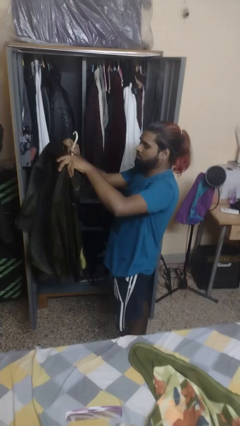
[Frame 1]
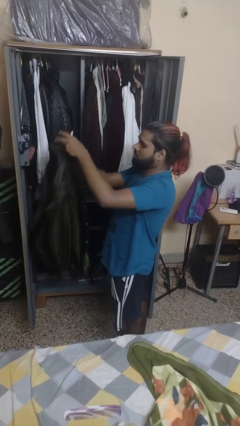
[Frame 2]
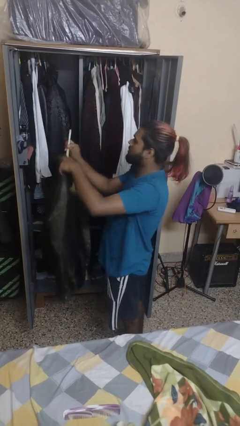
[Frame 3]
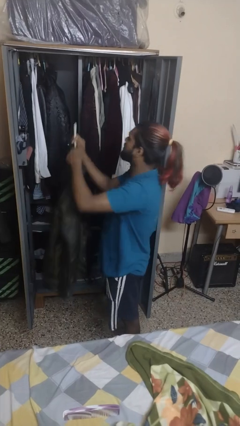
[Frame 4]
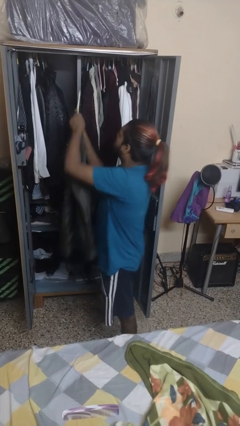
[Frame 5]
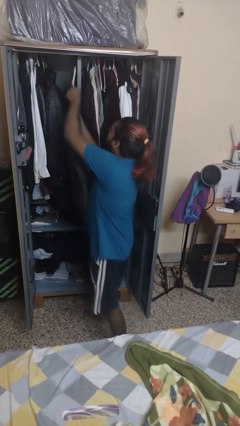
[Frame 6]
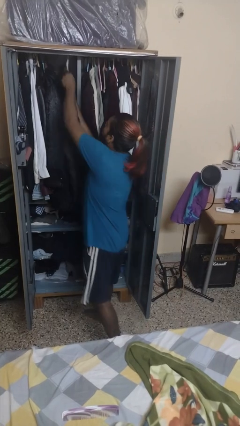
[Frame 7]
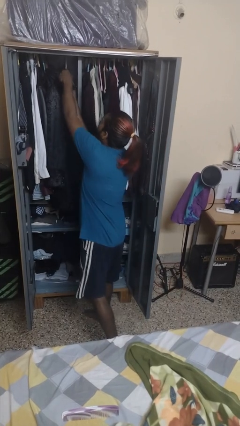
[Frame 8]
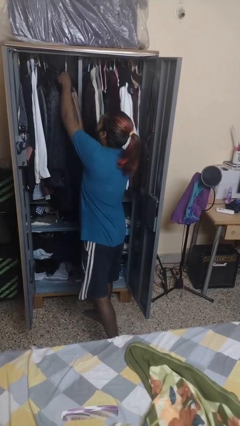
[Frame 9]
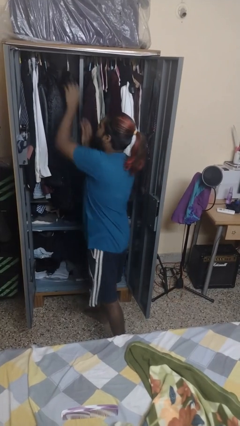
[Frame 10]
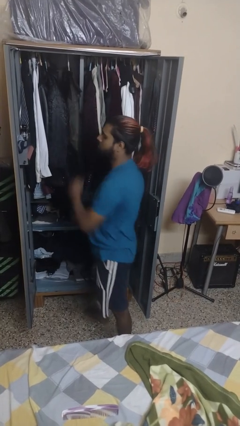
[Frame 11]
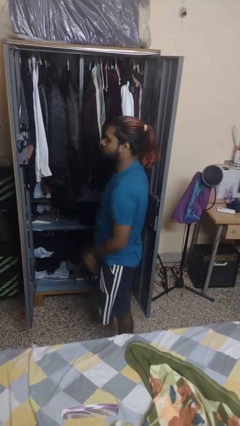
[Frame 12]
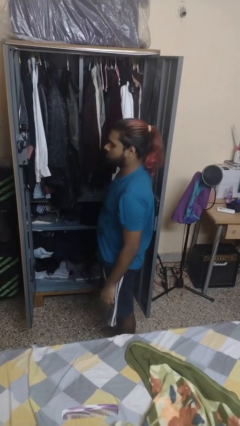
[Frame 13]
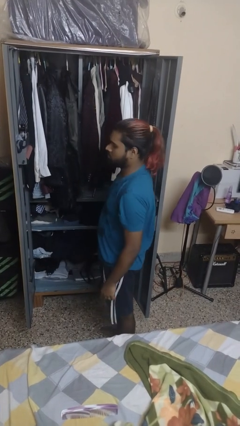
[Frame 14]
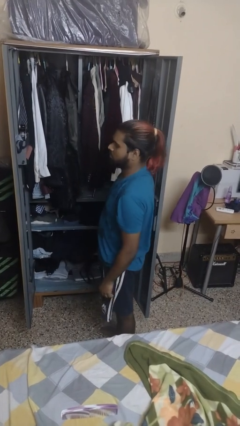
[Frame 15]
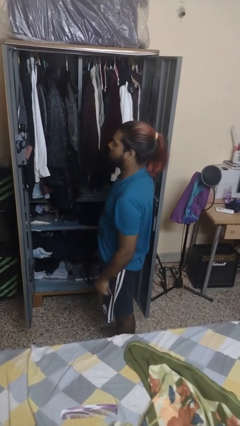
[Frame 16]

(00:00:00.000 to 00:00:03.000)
person puts clothes into dresser

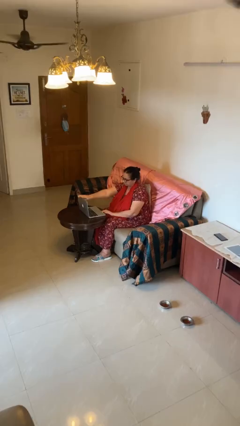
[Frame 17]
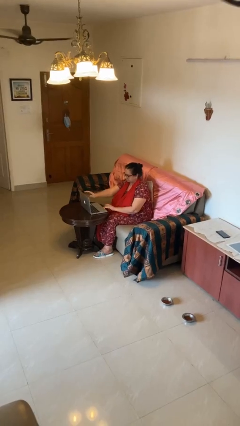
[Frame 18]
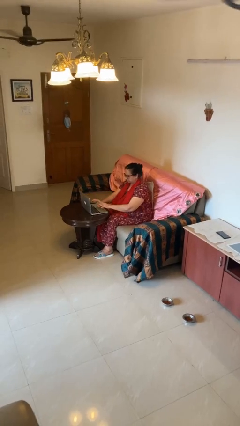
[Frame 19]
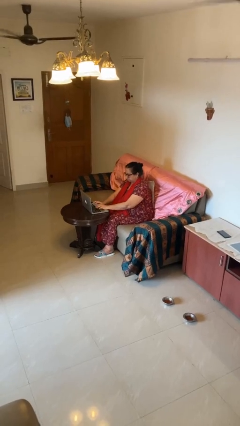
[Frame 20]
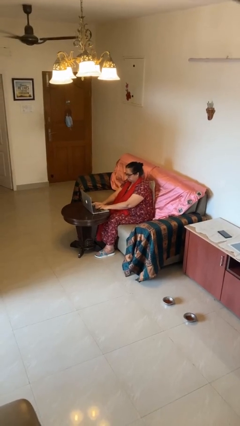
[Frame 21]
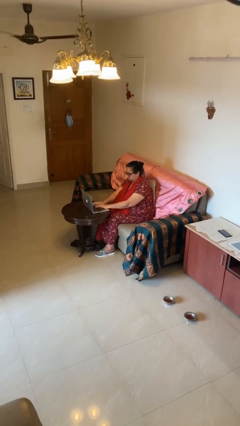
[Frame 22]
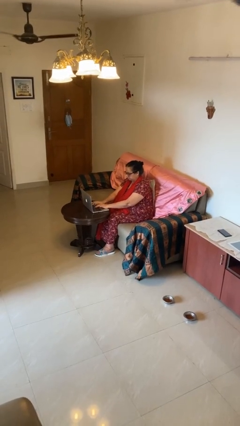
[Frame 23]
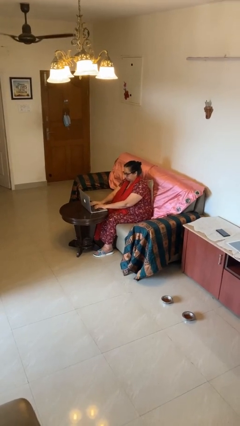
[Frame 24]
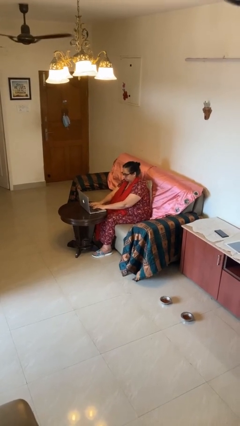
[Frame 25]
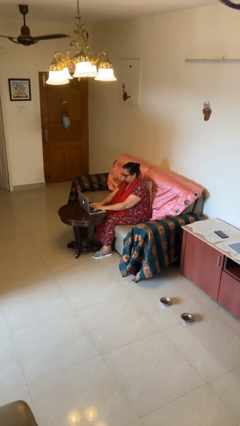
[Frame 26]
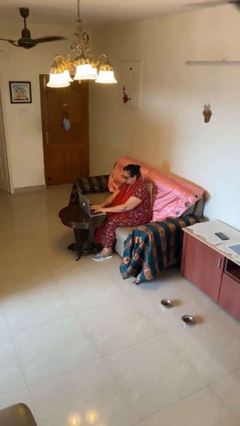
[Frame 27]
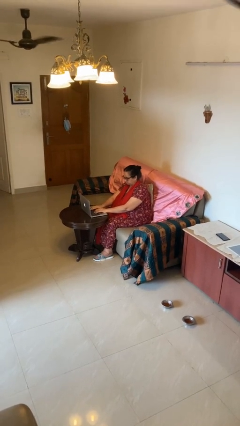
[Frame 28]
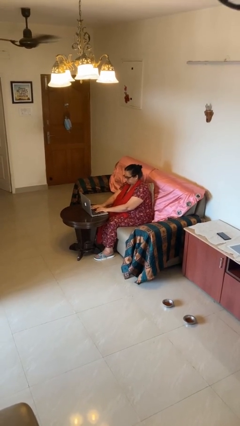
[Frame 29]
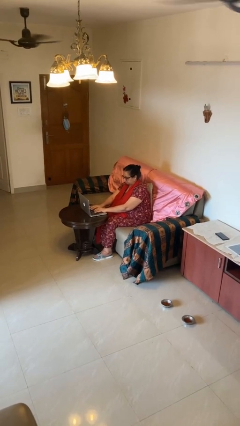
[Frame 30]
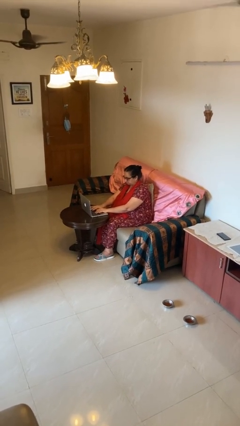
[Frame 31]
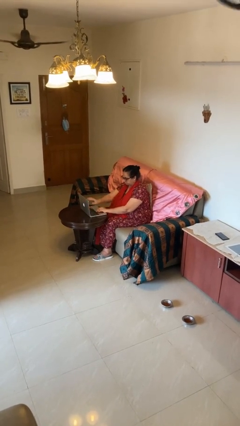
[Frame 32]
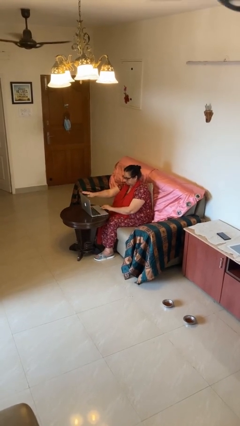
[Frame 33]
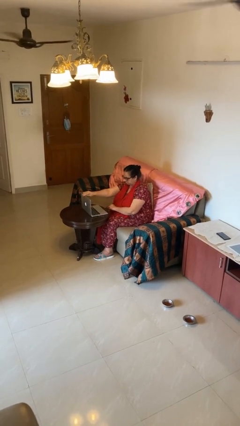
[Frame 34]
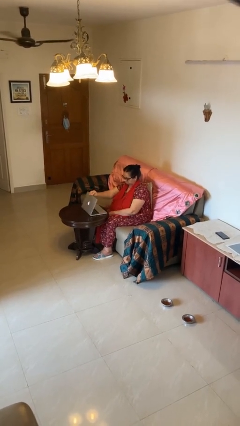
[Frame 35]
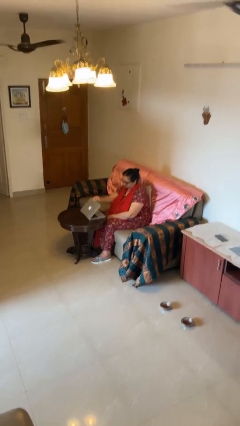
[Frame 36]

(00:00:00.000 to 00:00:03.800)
person interacts with laptop

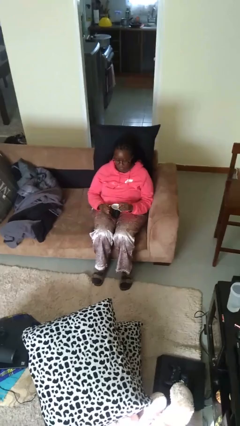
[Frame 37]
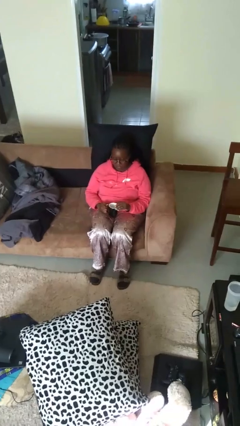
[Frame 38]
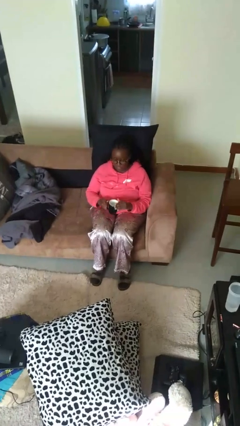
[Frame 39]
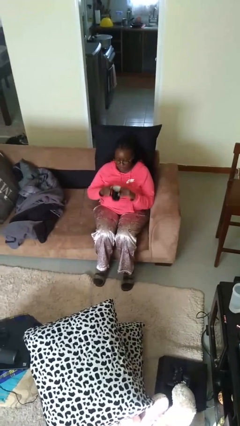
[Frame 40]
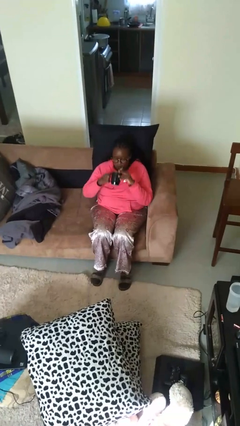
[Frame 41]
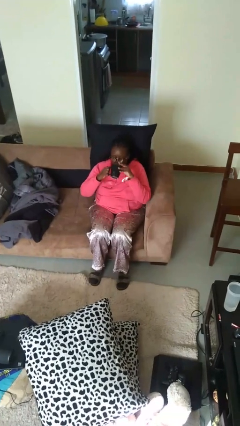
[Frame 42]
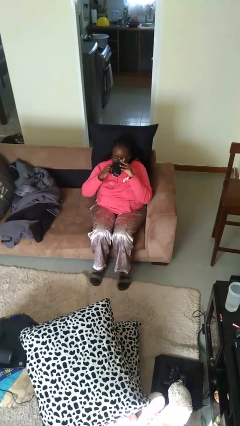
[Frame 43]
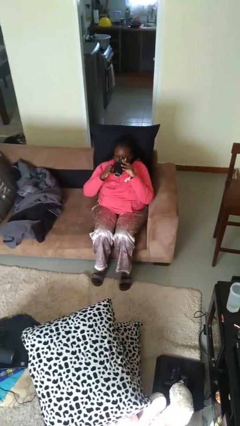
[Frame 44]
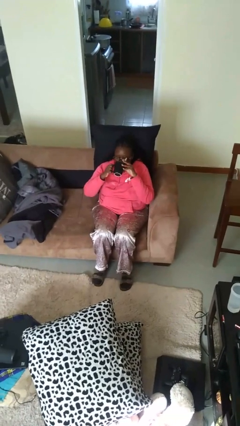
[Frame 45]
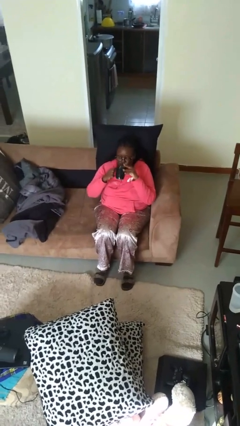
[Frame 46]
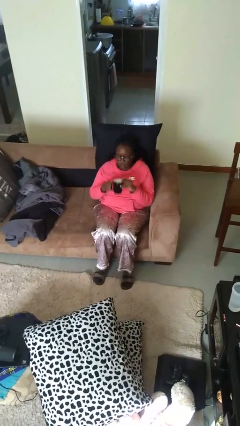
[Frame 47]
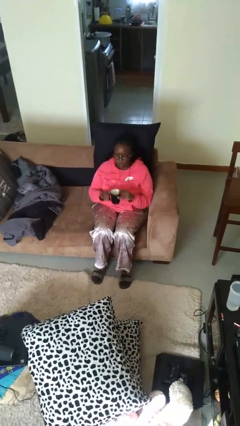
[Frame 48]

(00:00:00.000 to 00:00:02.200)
person drinks from mug

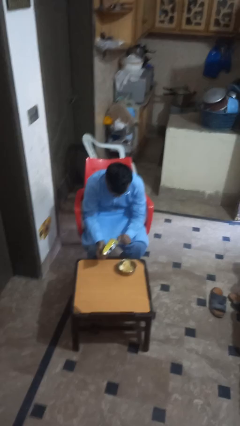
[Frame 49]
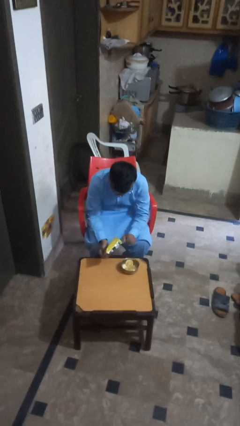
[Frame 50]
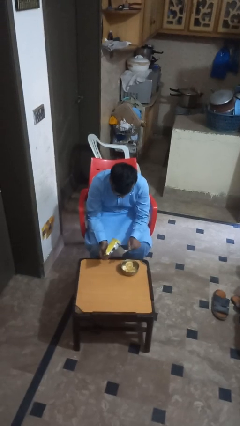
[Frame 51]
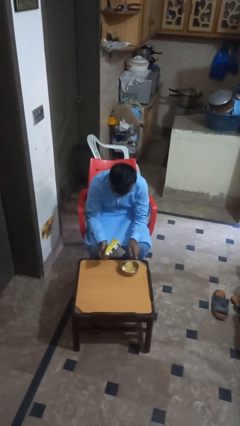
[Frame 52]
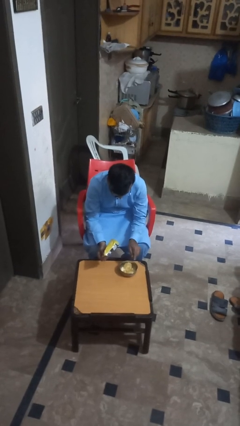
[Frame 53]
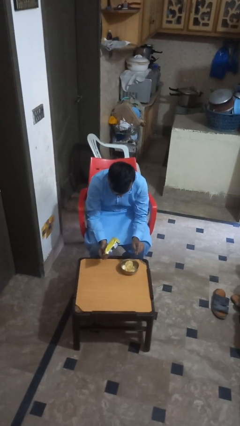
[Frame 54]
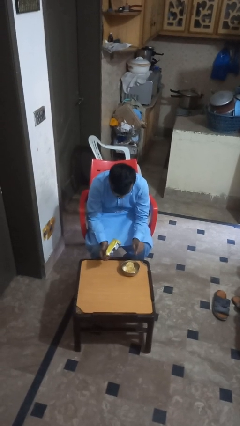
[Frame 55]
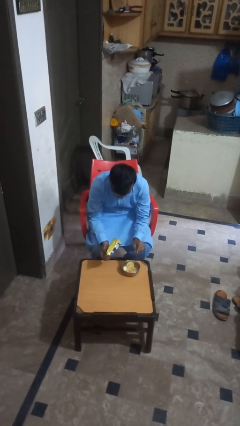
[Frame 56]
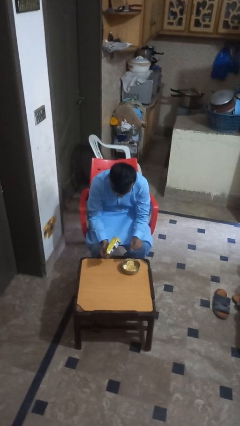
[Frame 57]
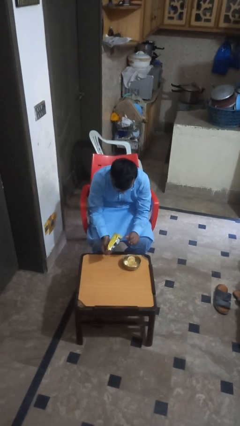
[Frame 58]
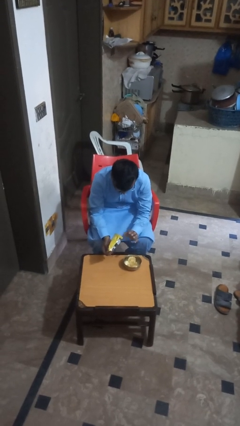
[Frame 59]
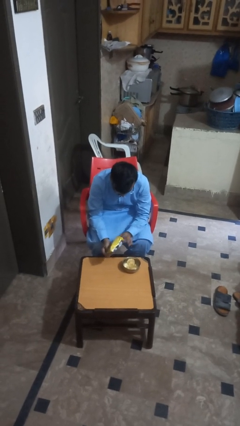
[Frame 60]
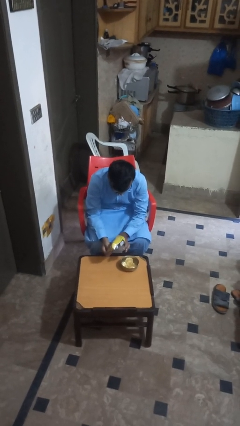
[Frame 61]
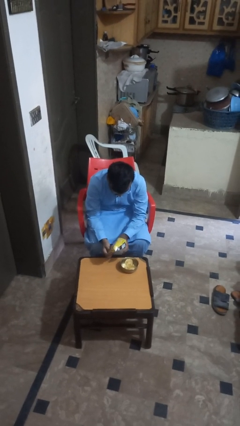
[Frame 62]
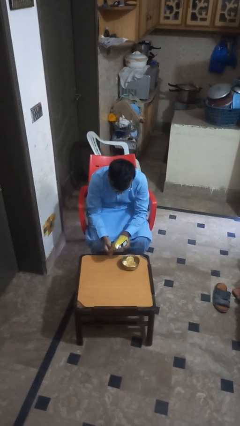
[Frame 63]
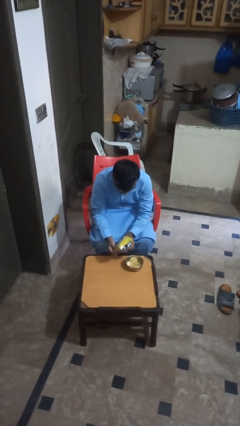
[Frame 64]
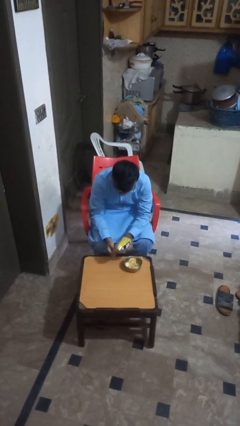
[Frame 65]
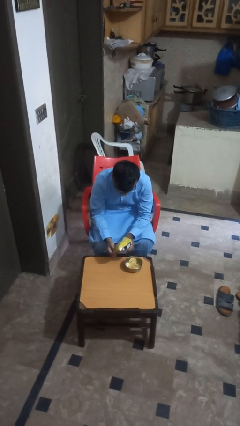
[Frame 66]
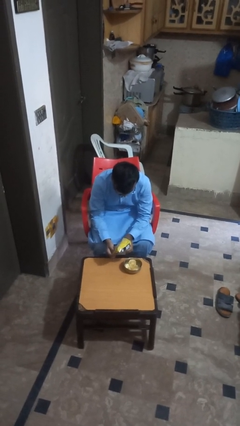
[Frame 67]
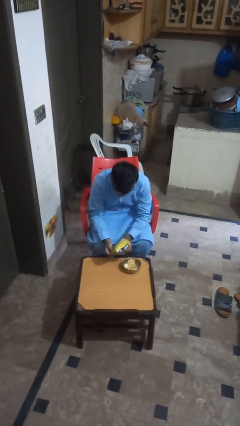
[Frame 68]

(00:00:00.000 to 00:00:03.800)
person pours into bowl

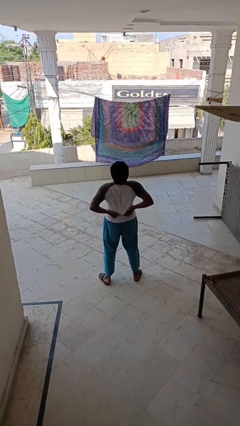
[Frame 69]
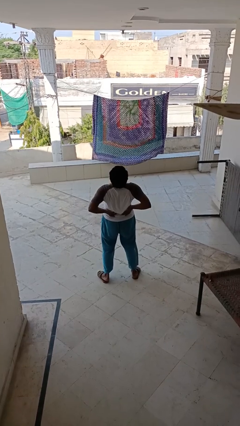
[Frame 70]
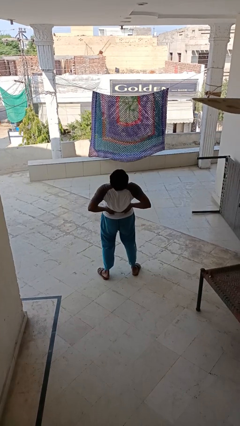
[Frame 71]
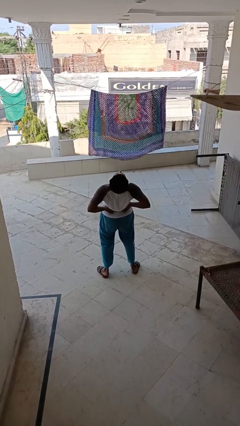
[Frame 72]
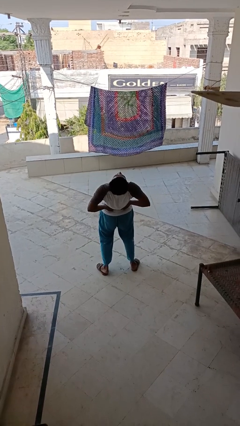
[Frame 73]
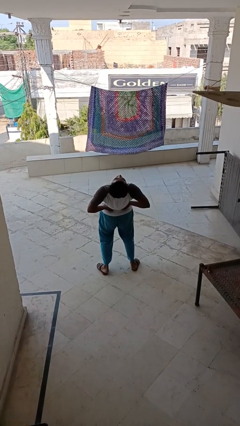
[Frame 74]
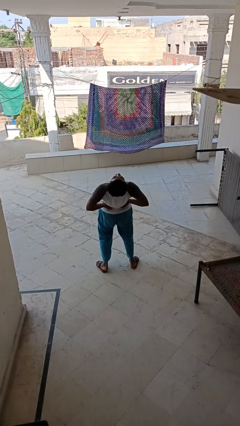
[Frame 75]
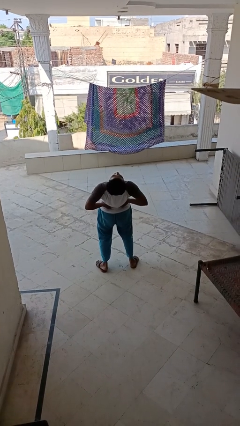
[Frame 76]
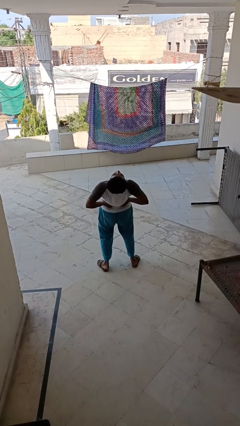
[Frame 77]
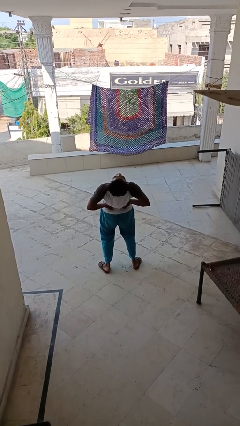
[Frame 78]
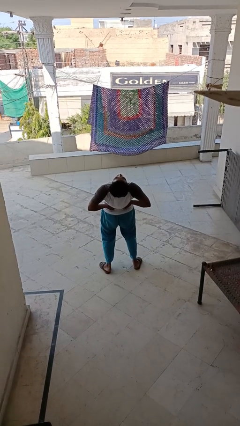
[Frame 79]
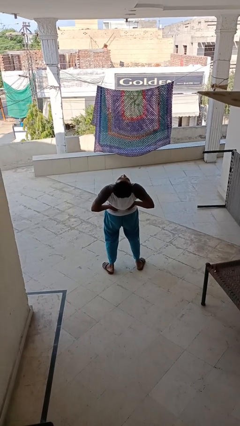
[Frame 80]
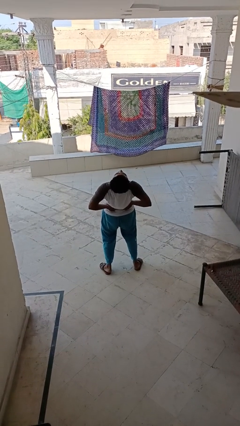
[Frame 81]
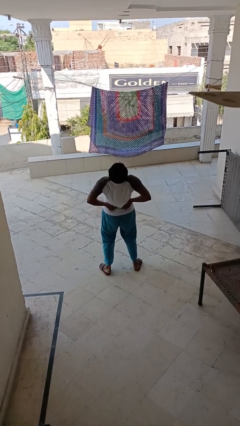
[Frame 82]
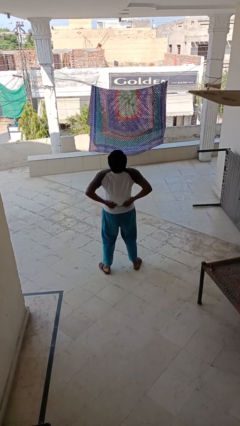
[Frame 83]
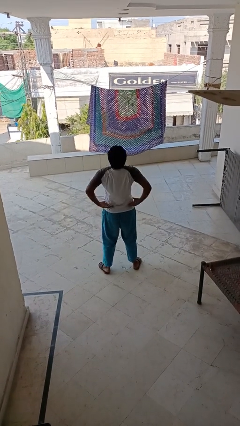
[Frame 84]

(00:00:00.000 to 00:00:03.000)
person stretches back

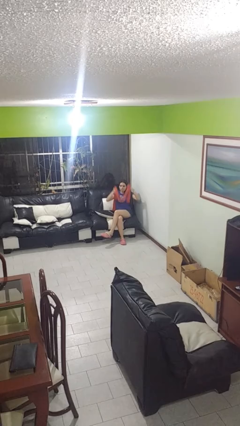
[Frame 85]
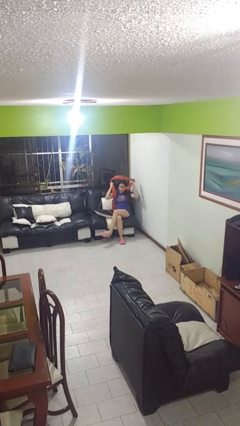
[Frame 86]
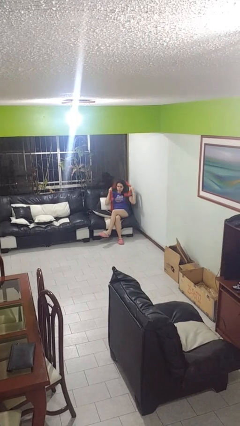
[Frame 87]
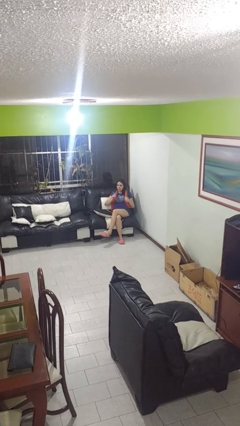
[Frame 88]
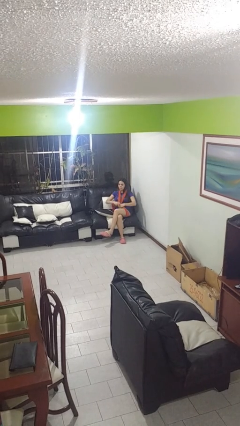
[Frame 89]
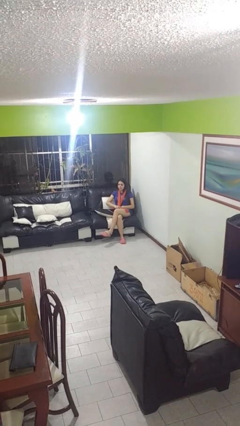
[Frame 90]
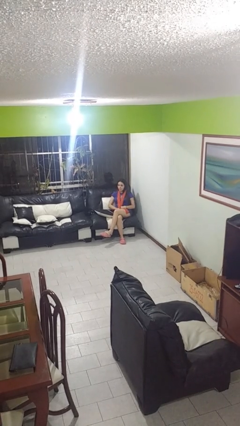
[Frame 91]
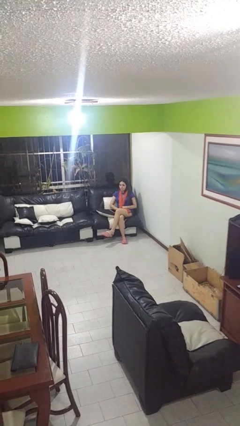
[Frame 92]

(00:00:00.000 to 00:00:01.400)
person puts on scarf

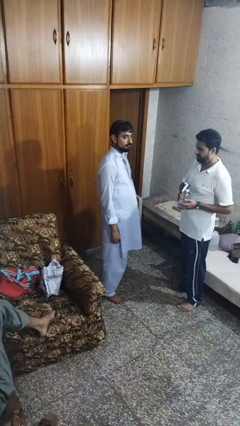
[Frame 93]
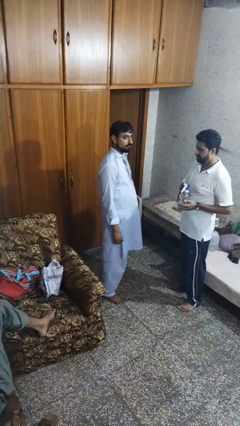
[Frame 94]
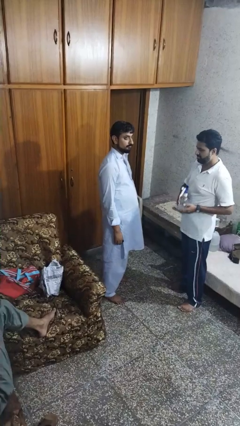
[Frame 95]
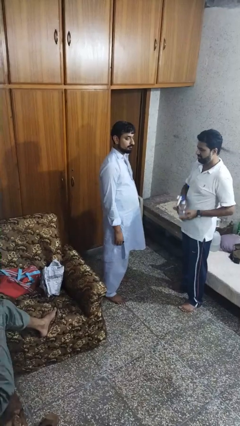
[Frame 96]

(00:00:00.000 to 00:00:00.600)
person catches object from person
